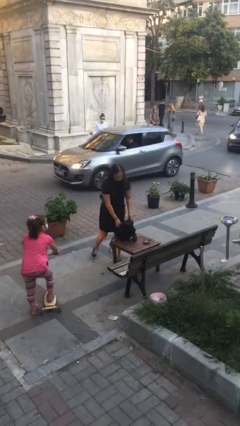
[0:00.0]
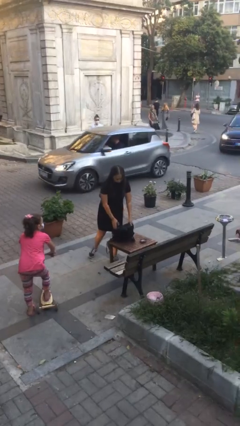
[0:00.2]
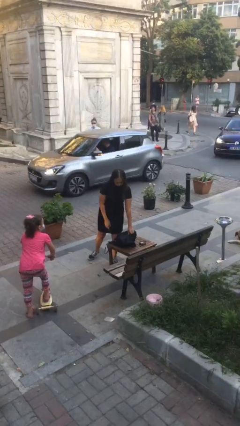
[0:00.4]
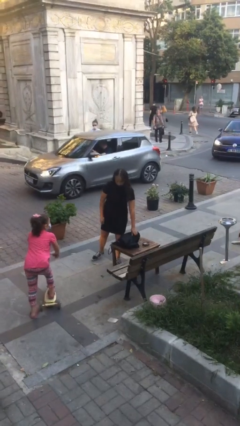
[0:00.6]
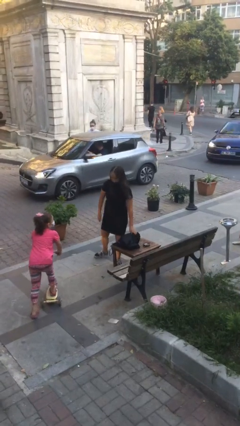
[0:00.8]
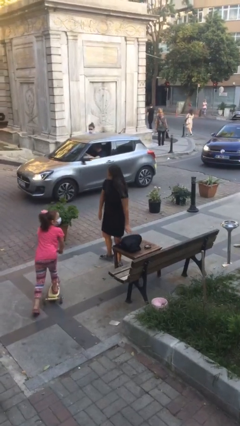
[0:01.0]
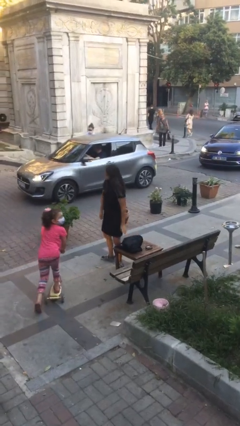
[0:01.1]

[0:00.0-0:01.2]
person puts down object on table

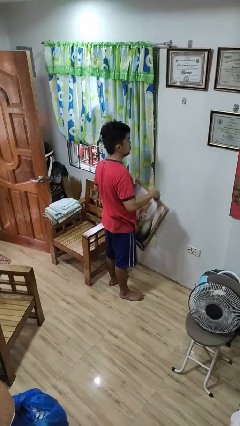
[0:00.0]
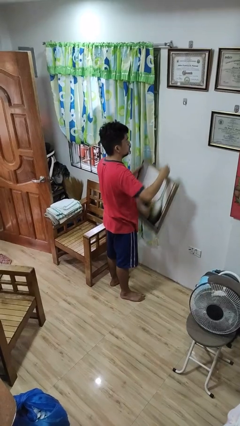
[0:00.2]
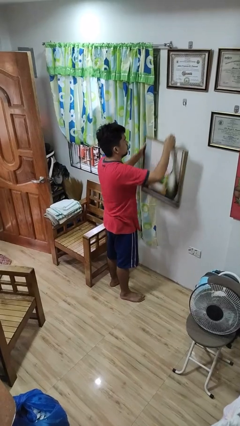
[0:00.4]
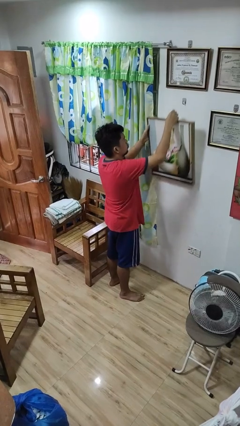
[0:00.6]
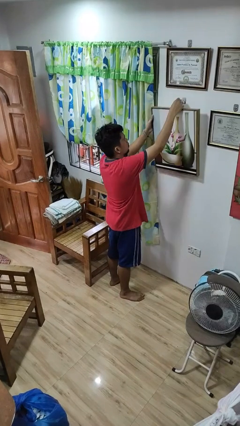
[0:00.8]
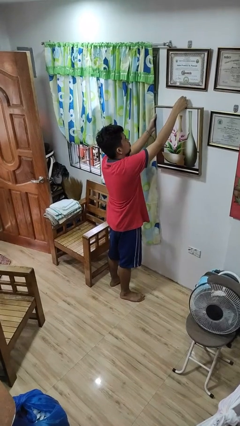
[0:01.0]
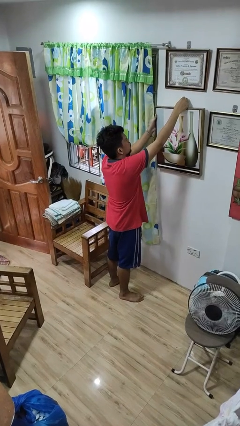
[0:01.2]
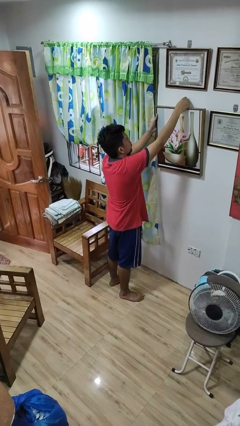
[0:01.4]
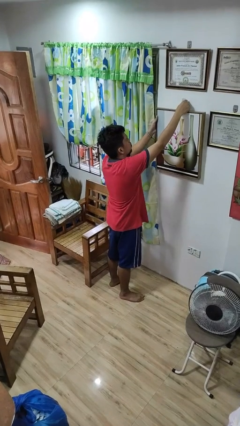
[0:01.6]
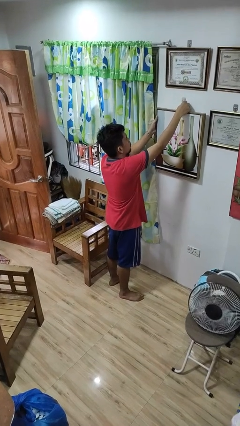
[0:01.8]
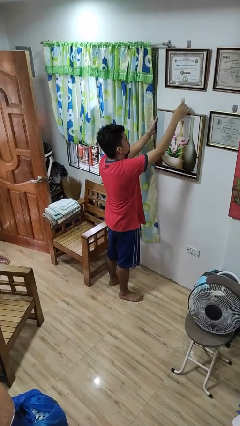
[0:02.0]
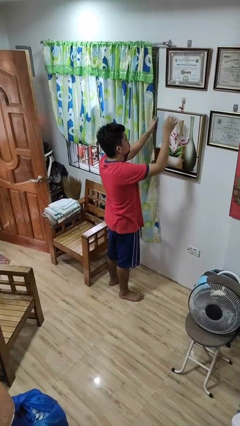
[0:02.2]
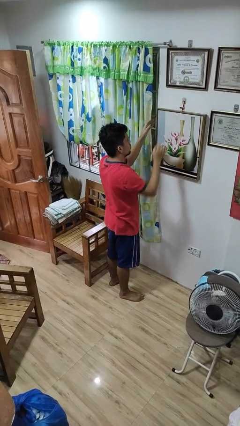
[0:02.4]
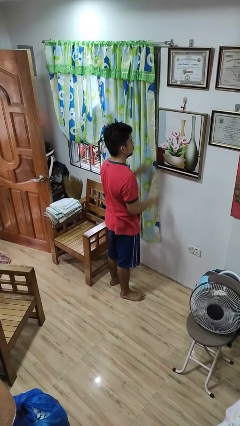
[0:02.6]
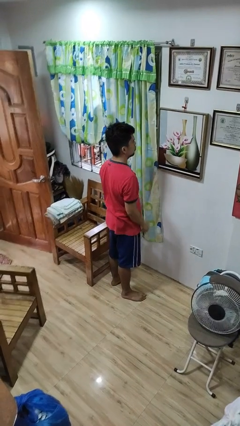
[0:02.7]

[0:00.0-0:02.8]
person puts up picture frame

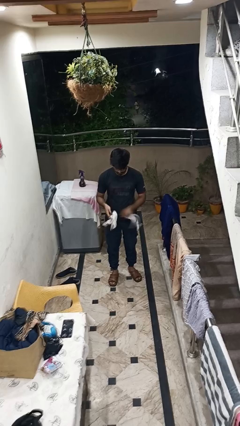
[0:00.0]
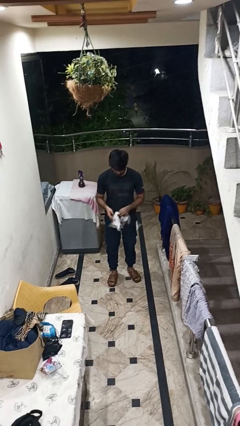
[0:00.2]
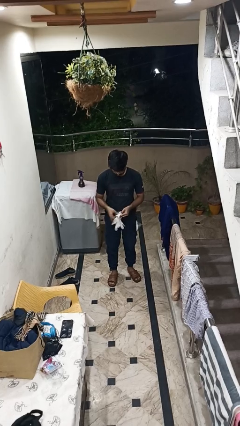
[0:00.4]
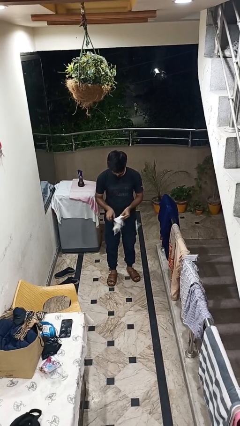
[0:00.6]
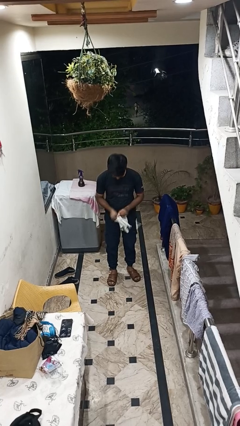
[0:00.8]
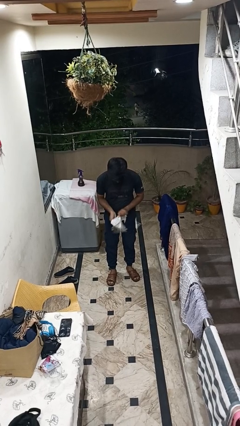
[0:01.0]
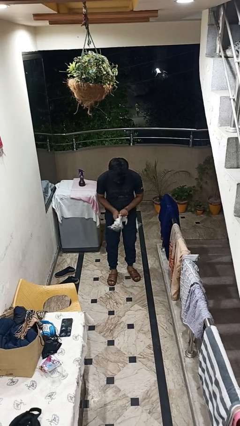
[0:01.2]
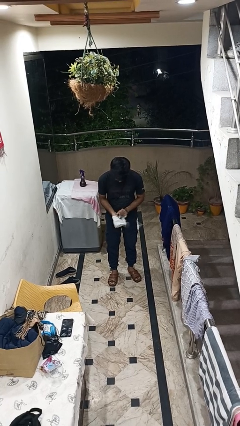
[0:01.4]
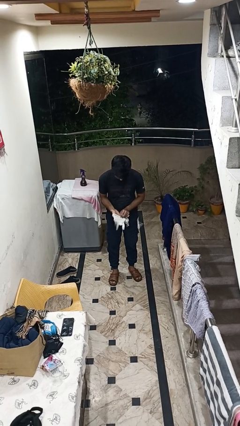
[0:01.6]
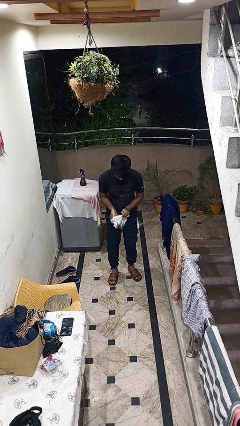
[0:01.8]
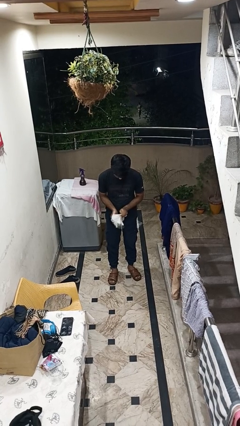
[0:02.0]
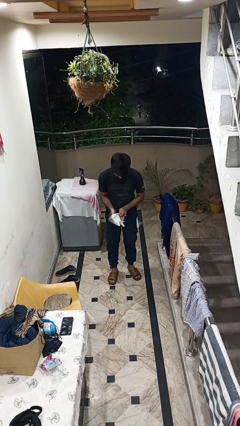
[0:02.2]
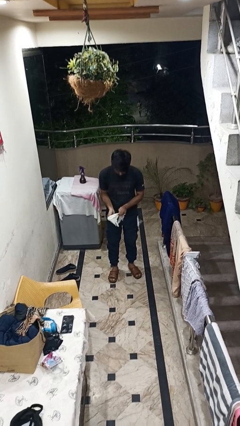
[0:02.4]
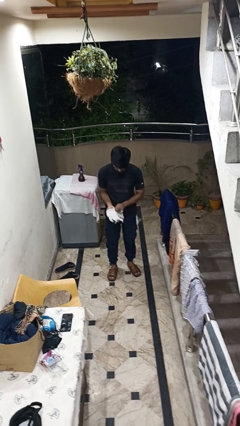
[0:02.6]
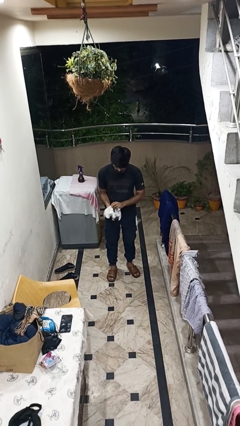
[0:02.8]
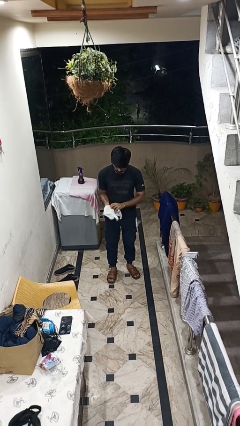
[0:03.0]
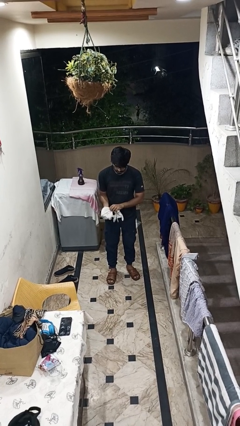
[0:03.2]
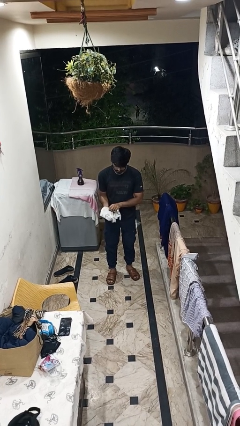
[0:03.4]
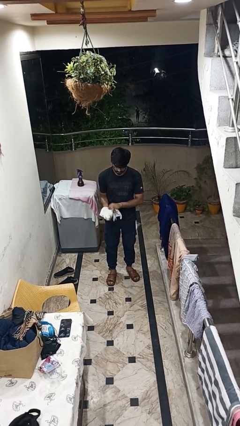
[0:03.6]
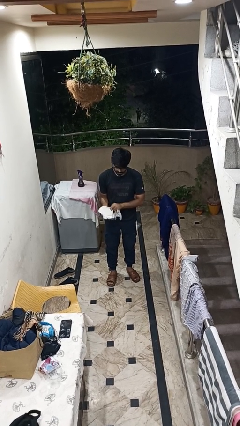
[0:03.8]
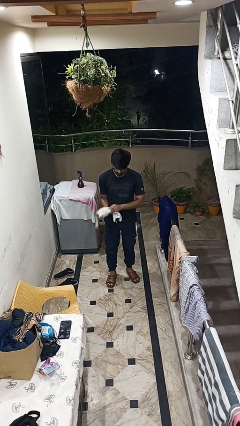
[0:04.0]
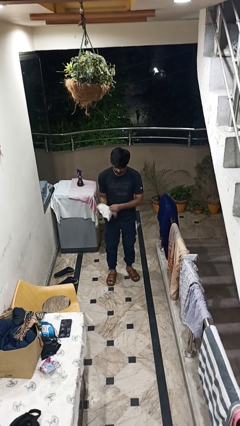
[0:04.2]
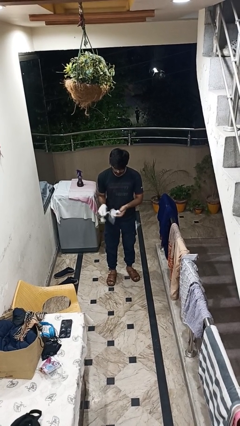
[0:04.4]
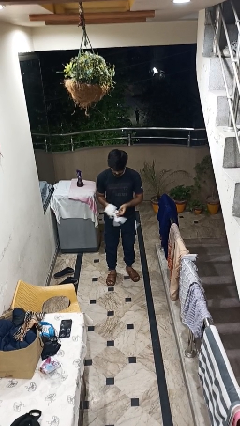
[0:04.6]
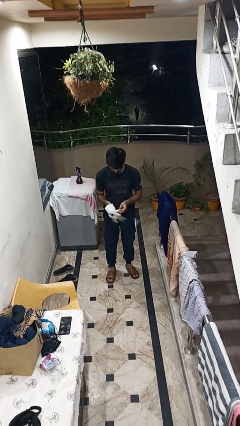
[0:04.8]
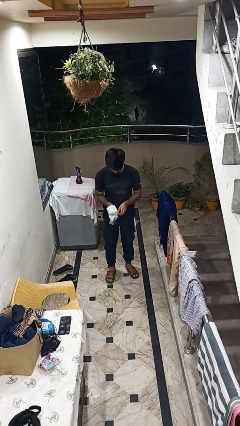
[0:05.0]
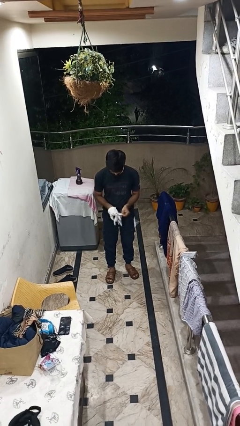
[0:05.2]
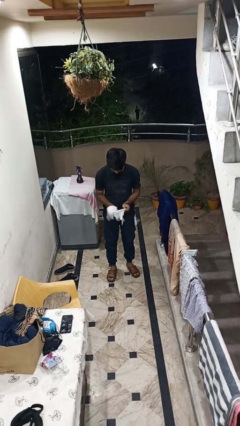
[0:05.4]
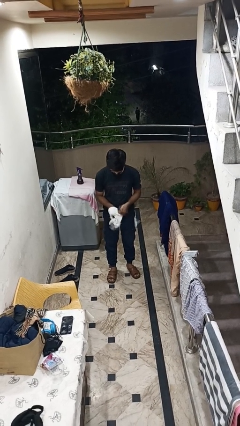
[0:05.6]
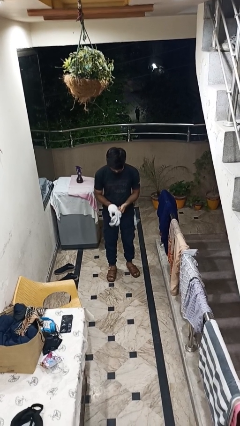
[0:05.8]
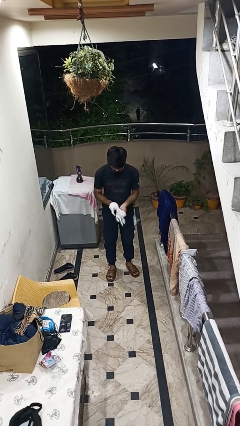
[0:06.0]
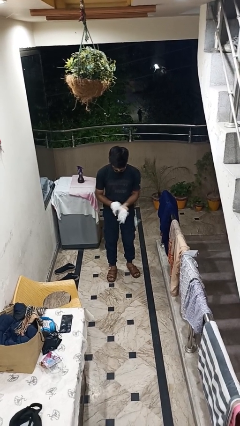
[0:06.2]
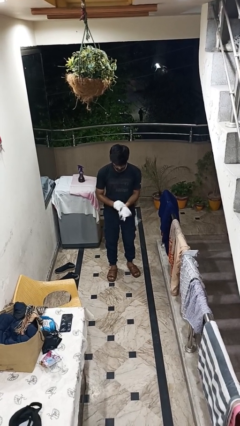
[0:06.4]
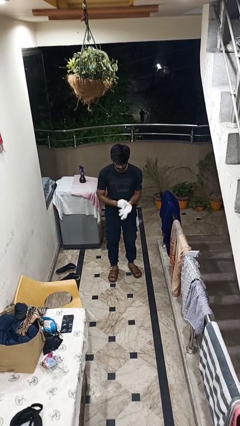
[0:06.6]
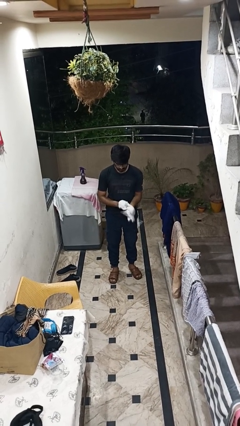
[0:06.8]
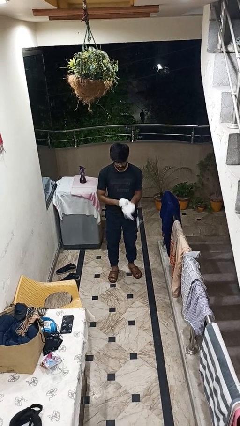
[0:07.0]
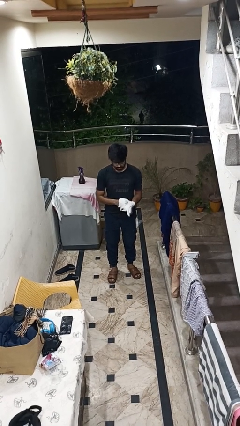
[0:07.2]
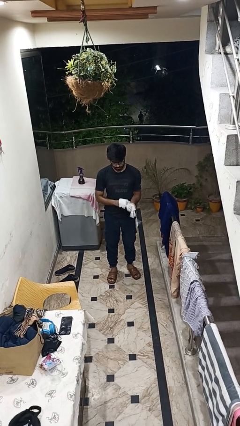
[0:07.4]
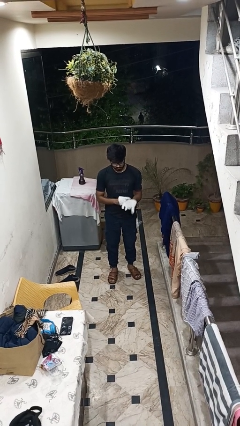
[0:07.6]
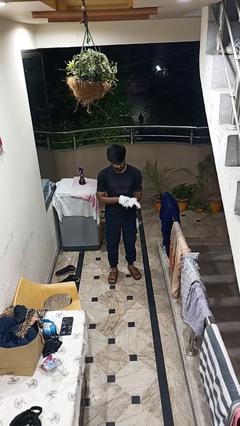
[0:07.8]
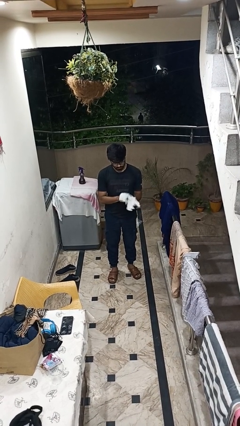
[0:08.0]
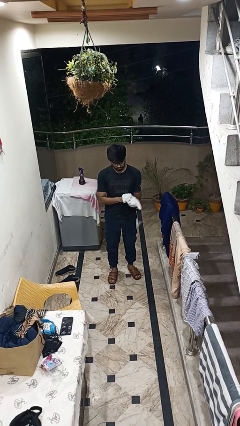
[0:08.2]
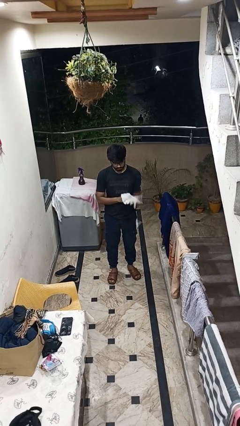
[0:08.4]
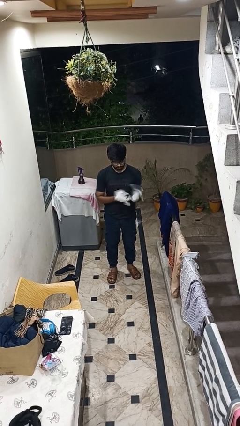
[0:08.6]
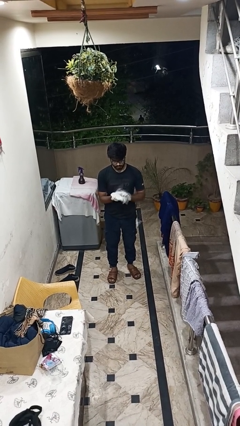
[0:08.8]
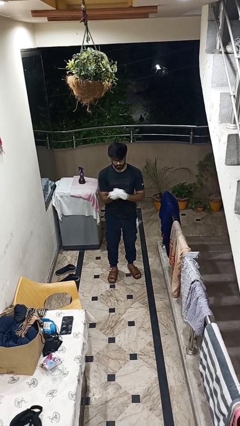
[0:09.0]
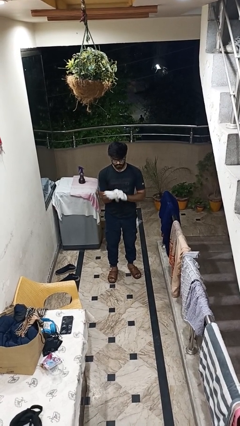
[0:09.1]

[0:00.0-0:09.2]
person puts on gloves

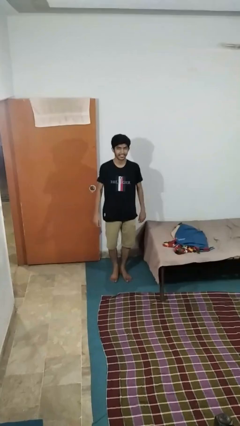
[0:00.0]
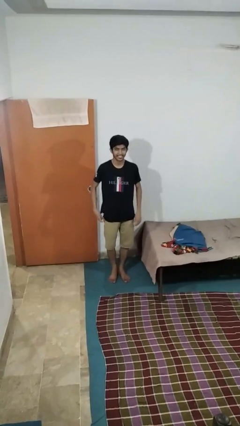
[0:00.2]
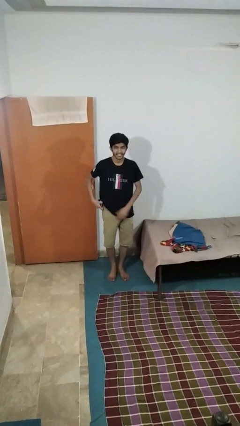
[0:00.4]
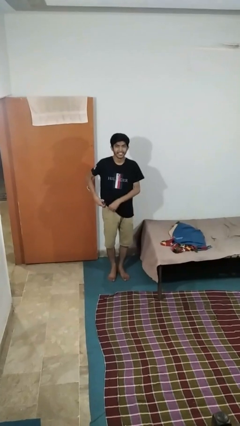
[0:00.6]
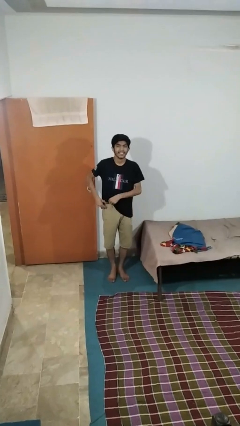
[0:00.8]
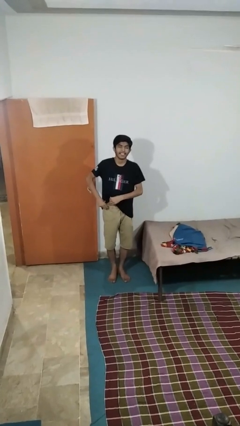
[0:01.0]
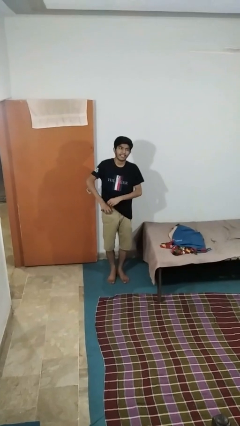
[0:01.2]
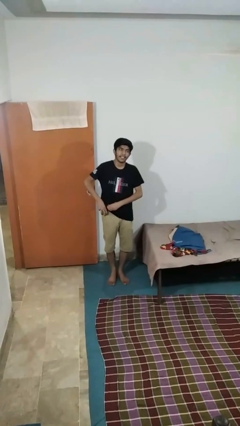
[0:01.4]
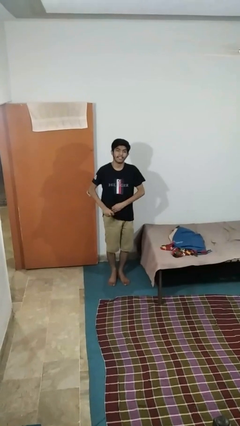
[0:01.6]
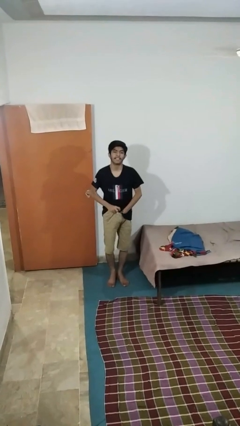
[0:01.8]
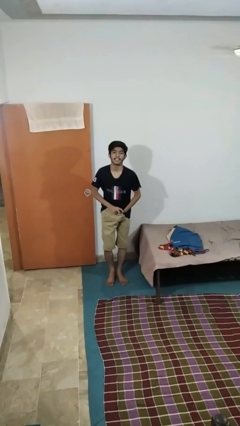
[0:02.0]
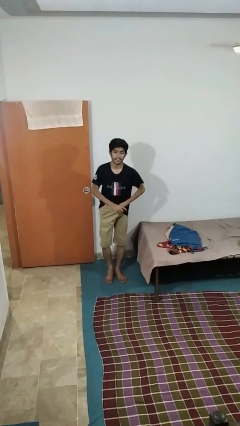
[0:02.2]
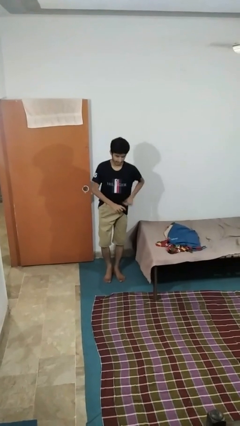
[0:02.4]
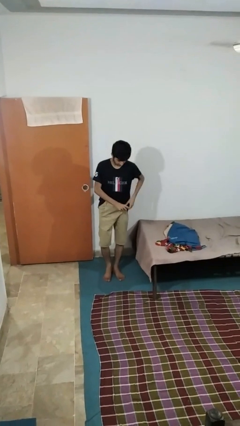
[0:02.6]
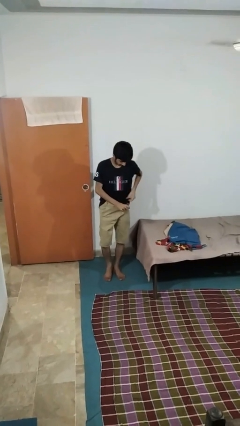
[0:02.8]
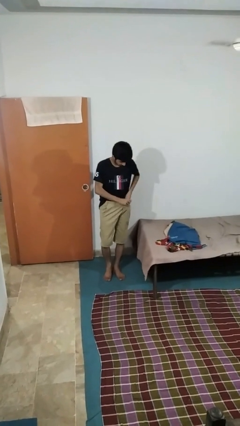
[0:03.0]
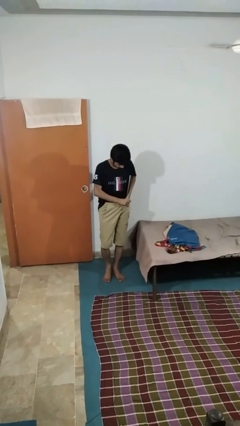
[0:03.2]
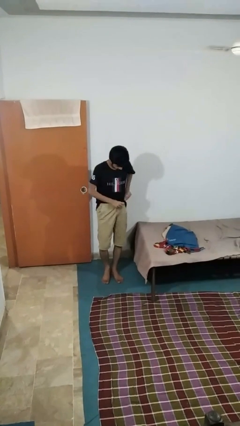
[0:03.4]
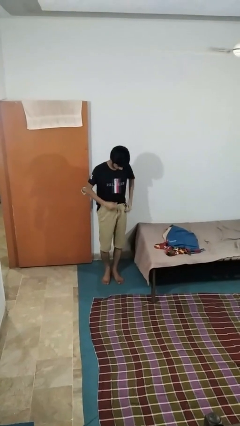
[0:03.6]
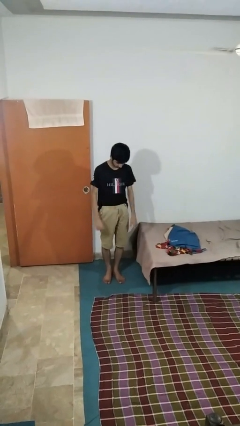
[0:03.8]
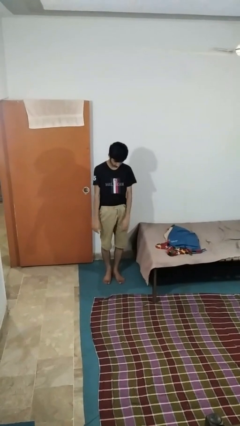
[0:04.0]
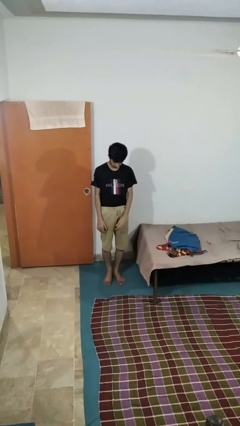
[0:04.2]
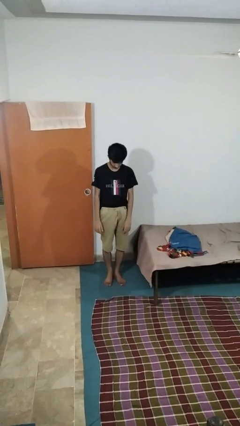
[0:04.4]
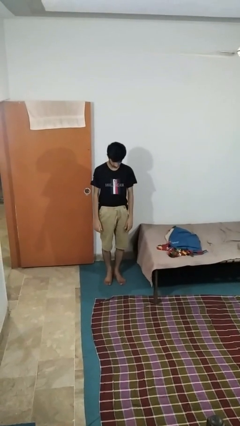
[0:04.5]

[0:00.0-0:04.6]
person tucks in shirt
